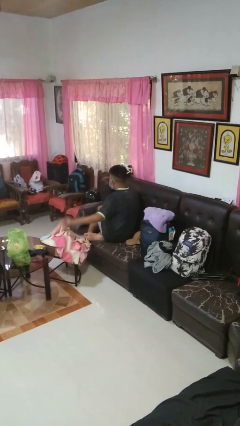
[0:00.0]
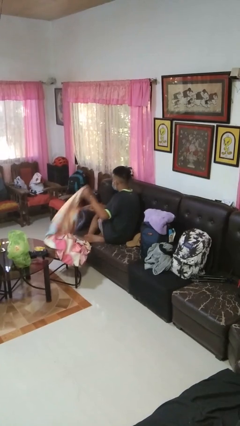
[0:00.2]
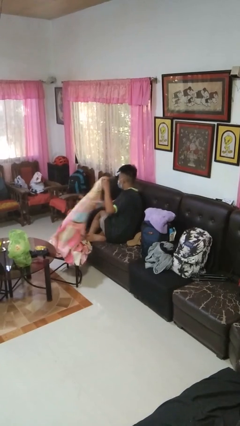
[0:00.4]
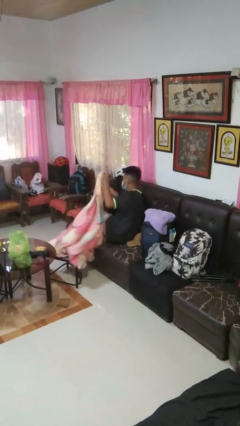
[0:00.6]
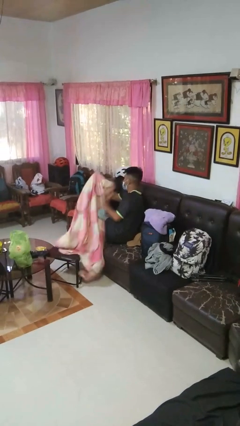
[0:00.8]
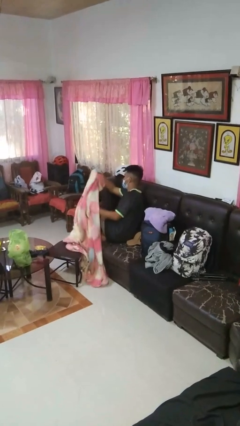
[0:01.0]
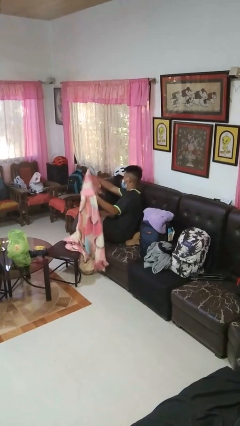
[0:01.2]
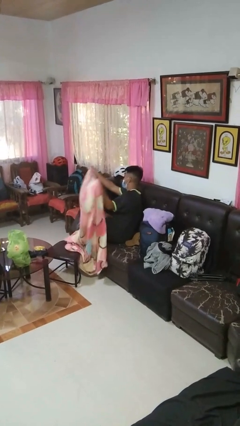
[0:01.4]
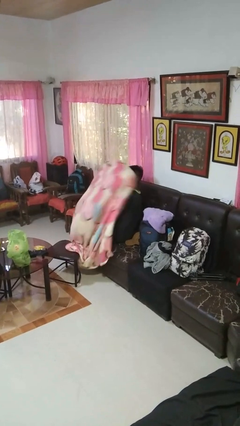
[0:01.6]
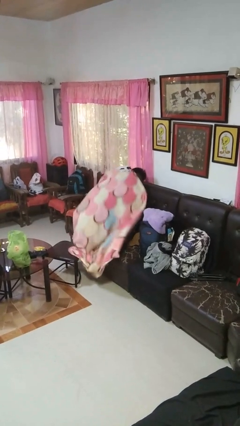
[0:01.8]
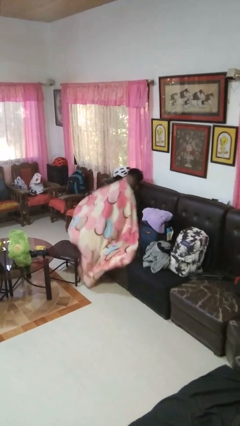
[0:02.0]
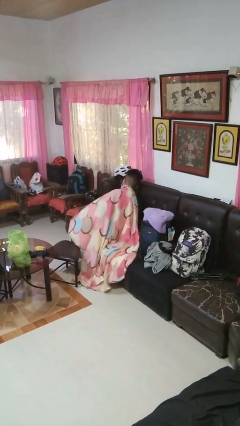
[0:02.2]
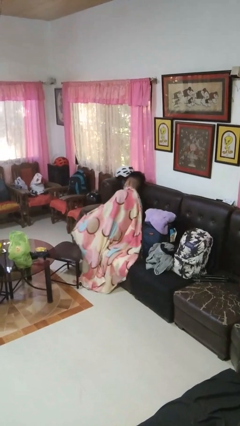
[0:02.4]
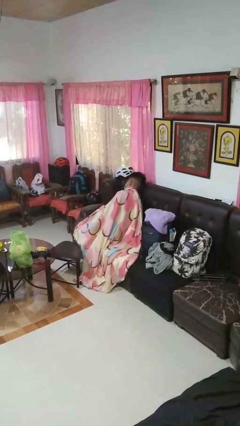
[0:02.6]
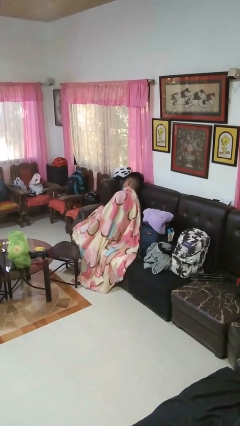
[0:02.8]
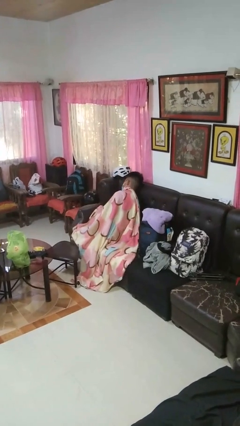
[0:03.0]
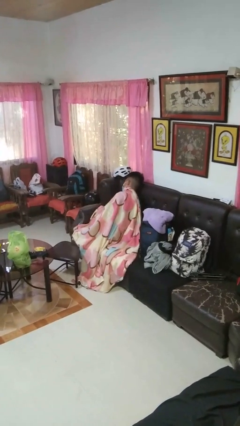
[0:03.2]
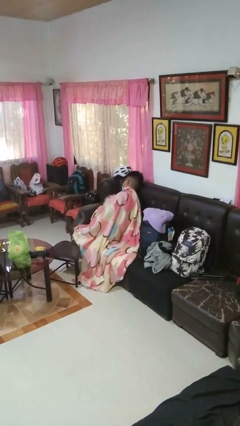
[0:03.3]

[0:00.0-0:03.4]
person covers with blanket

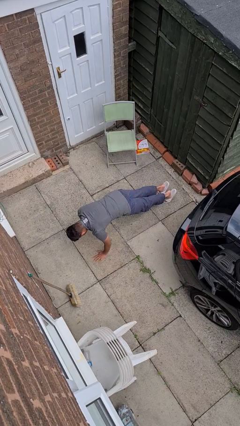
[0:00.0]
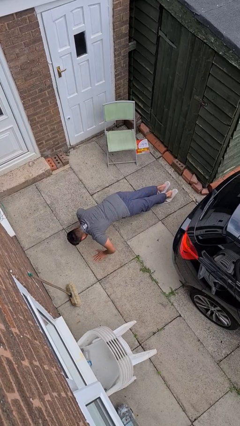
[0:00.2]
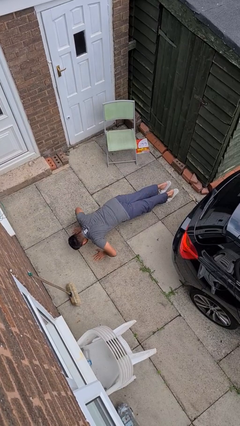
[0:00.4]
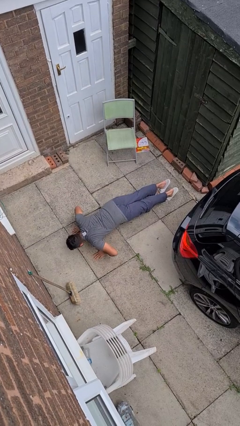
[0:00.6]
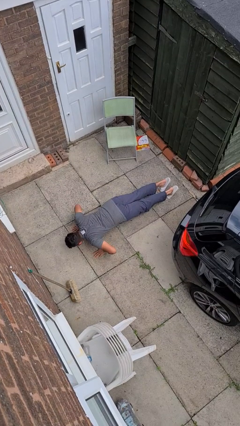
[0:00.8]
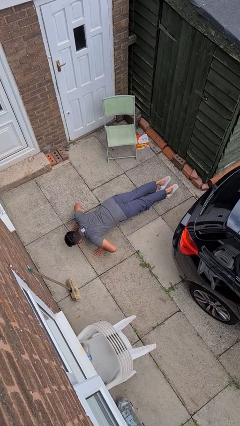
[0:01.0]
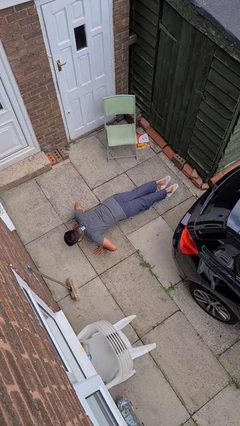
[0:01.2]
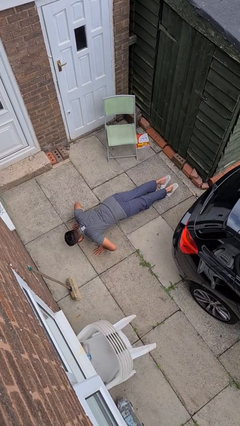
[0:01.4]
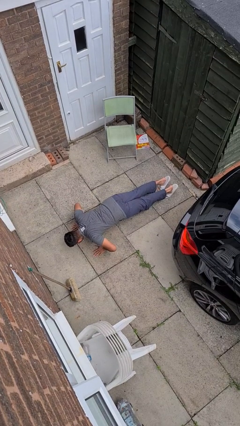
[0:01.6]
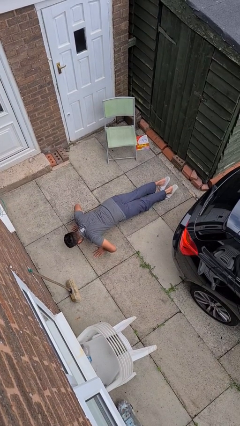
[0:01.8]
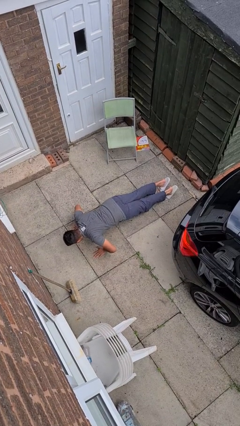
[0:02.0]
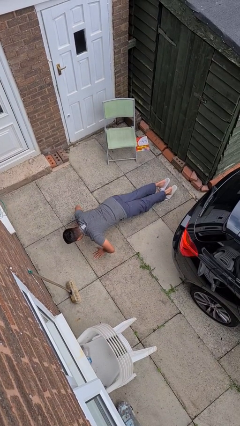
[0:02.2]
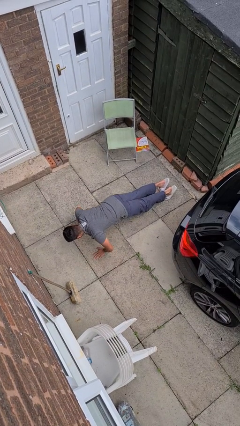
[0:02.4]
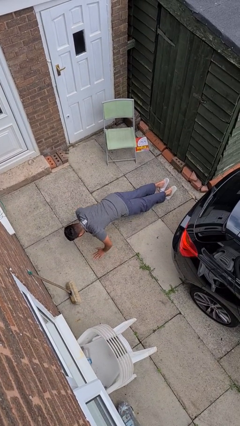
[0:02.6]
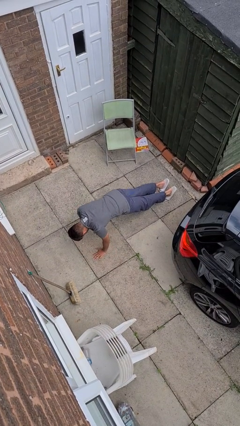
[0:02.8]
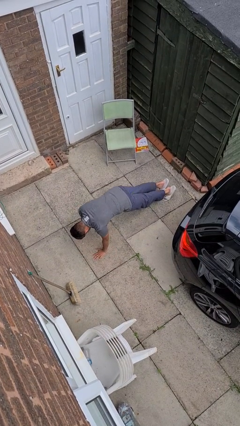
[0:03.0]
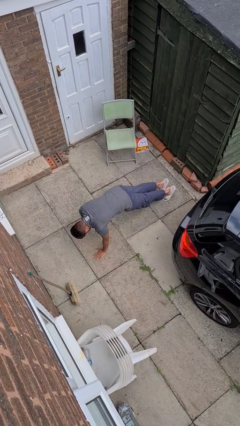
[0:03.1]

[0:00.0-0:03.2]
person exercises with pushup

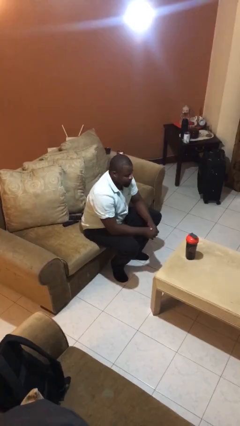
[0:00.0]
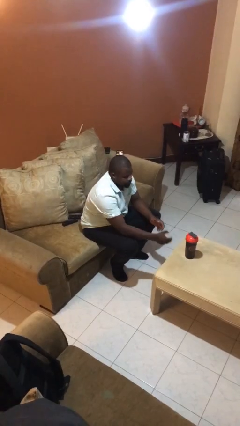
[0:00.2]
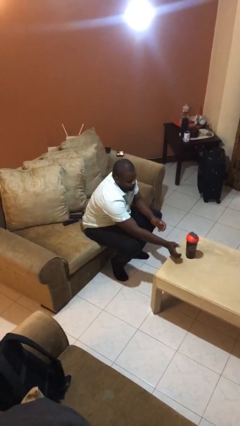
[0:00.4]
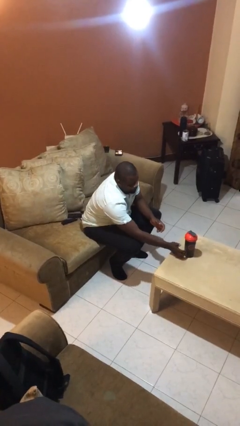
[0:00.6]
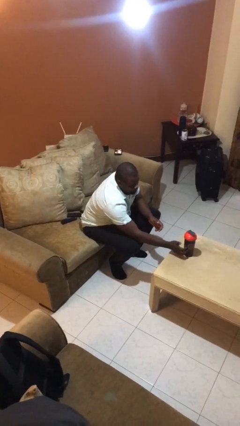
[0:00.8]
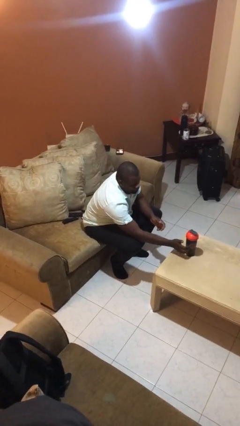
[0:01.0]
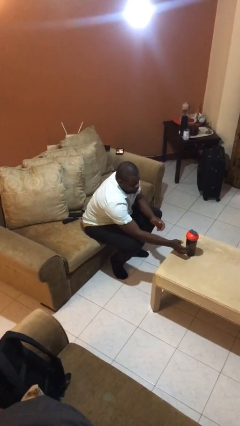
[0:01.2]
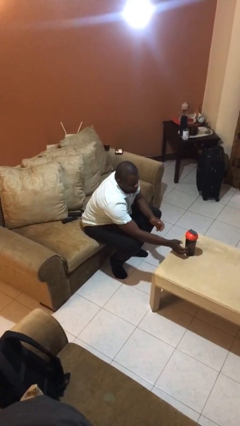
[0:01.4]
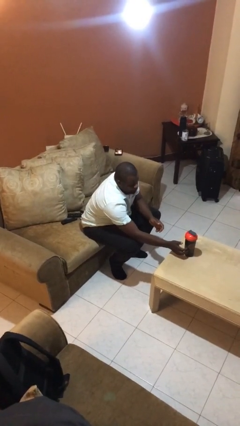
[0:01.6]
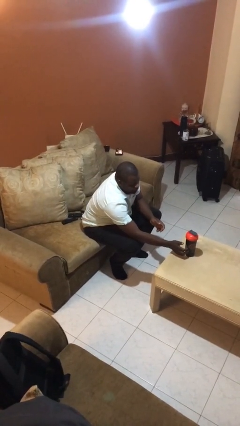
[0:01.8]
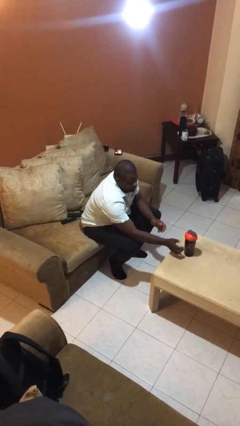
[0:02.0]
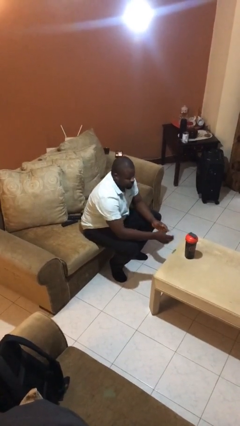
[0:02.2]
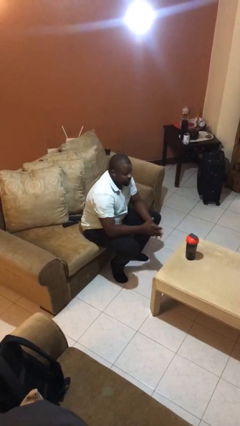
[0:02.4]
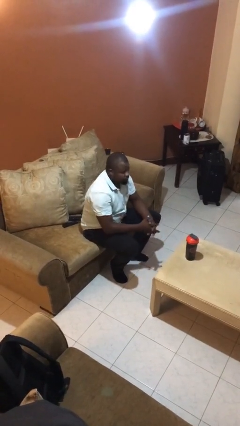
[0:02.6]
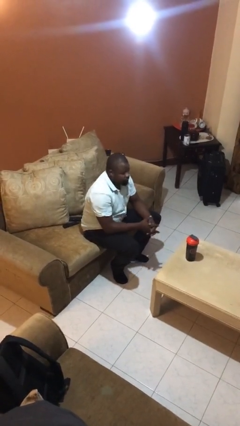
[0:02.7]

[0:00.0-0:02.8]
person taps object with finger

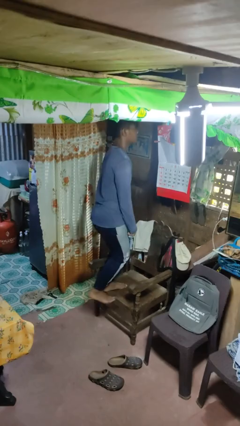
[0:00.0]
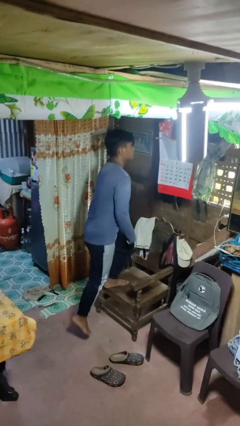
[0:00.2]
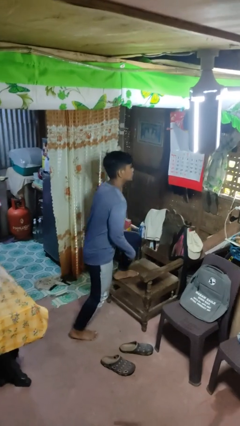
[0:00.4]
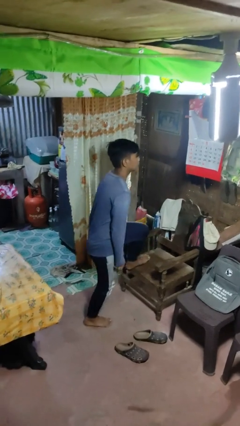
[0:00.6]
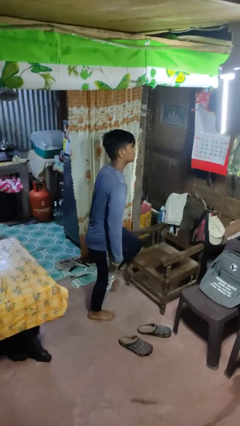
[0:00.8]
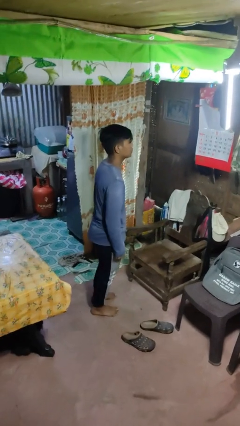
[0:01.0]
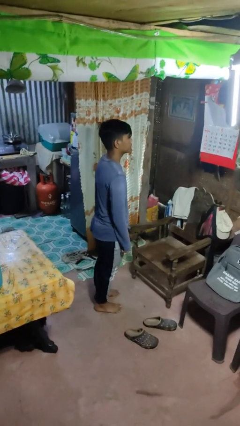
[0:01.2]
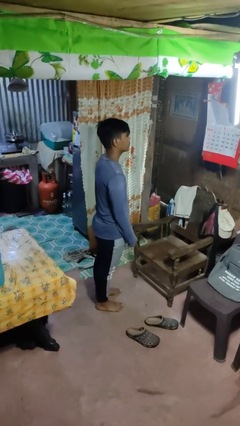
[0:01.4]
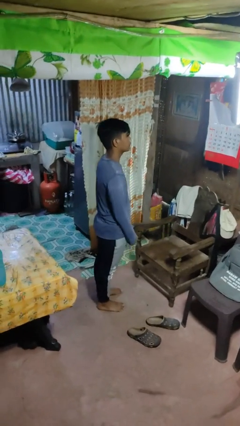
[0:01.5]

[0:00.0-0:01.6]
person climbs off chair

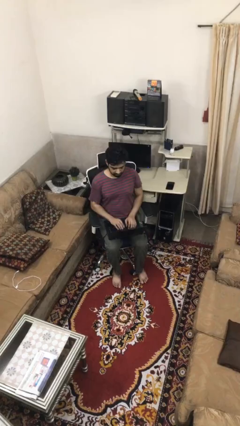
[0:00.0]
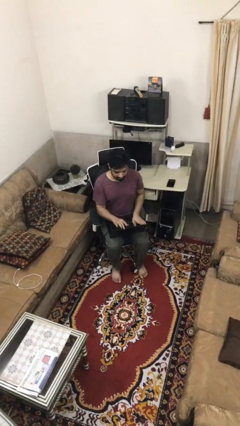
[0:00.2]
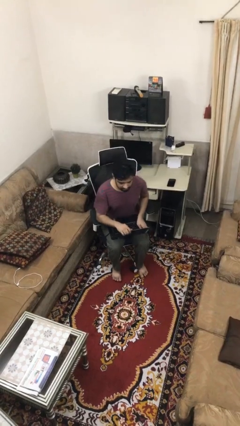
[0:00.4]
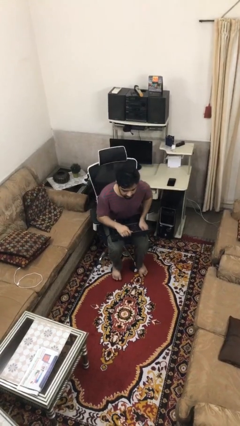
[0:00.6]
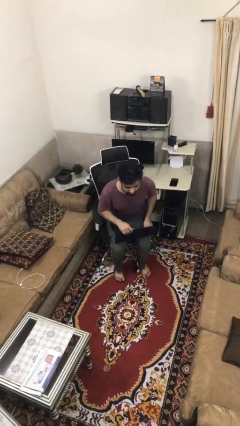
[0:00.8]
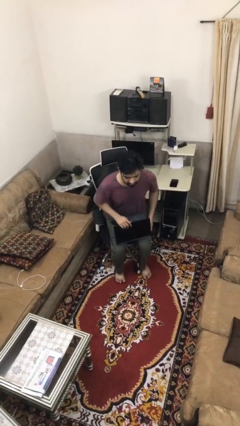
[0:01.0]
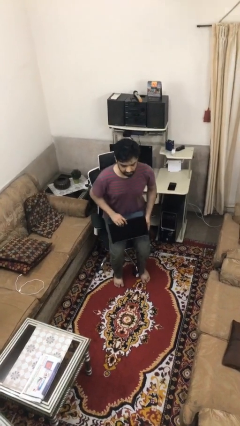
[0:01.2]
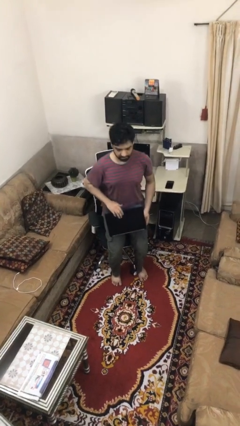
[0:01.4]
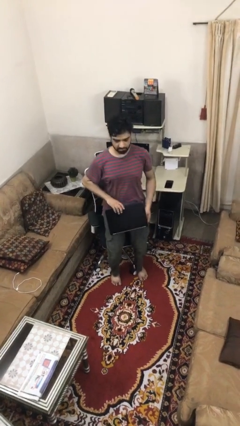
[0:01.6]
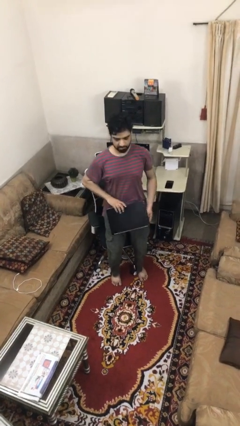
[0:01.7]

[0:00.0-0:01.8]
person stands up

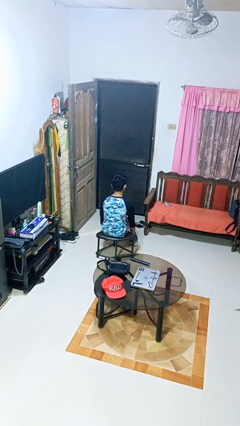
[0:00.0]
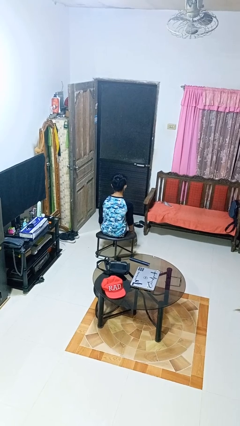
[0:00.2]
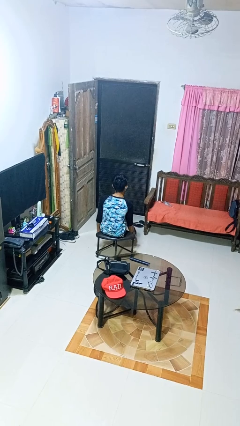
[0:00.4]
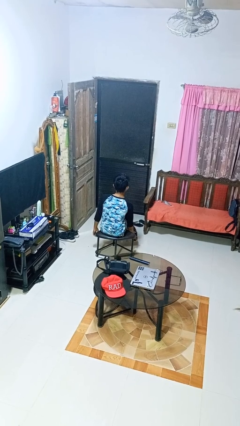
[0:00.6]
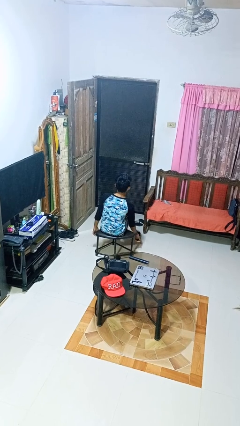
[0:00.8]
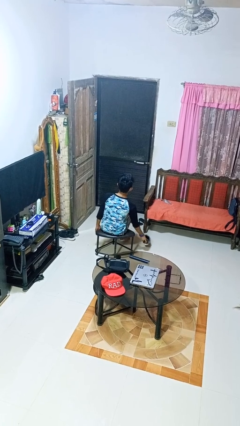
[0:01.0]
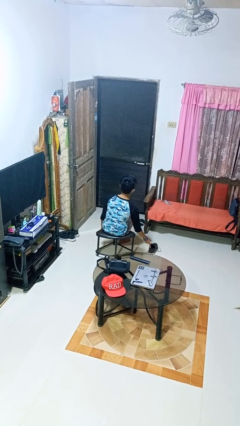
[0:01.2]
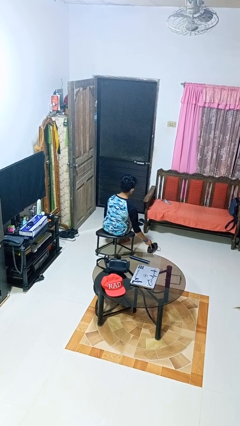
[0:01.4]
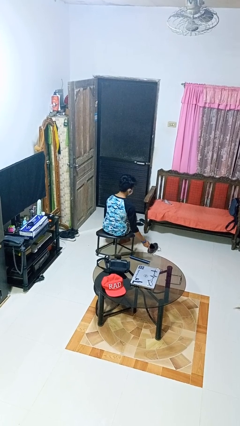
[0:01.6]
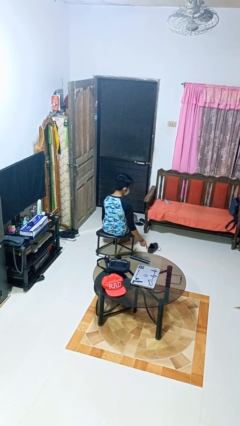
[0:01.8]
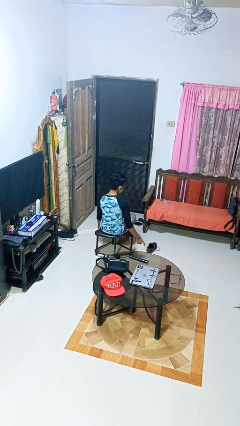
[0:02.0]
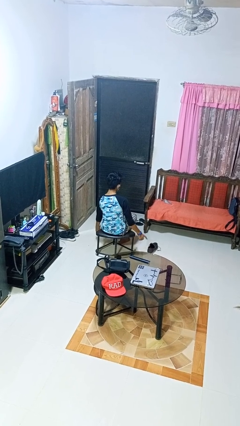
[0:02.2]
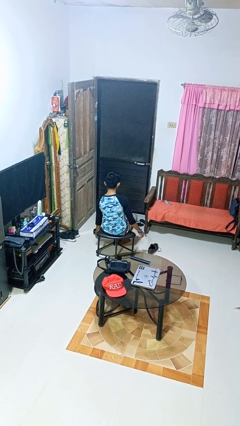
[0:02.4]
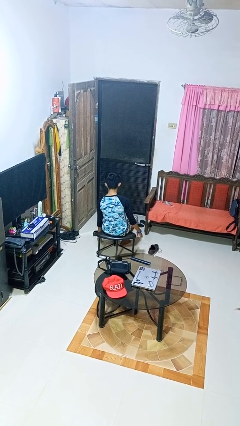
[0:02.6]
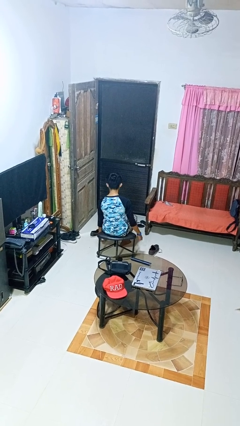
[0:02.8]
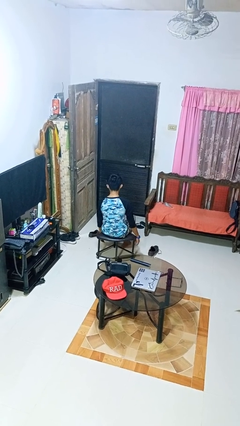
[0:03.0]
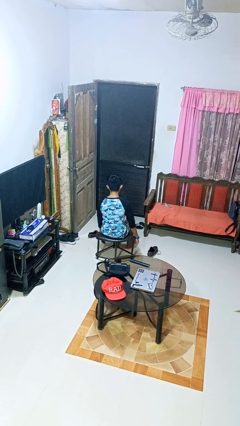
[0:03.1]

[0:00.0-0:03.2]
person takes off shoes

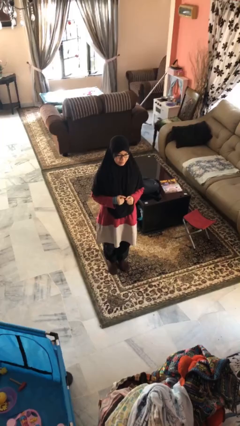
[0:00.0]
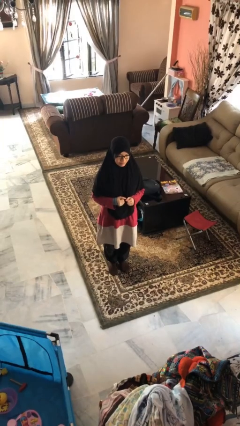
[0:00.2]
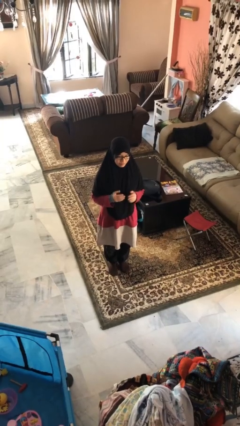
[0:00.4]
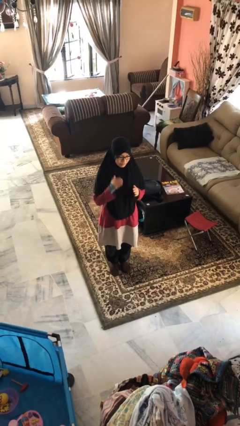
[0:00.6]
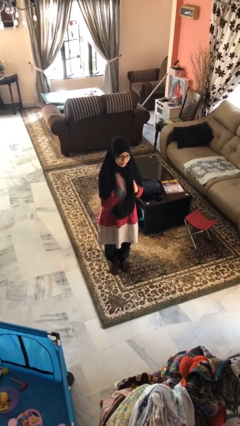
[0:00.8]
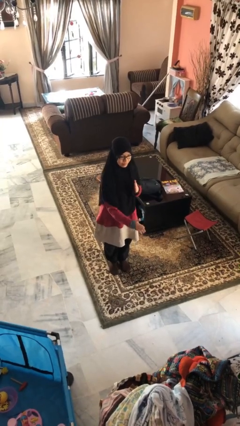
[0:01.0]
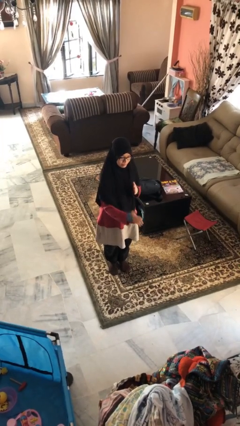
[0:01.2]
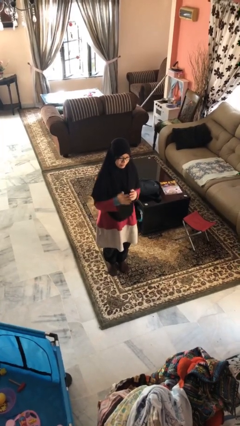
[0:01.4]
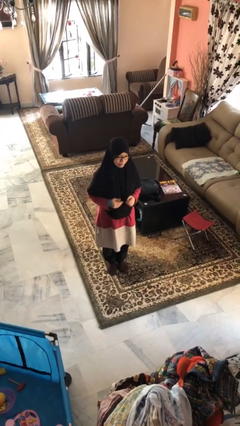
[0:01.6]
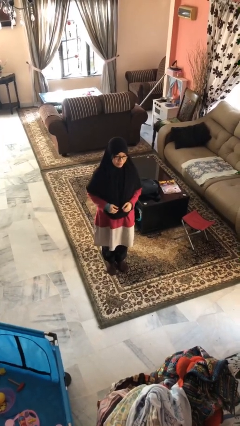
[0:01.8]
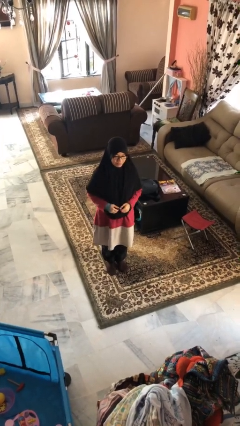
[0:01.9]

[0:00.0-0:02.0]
person karate chop
